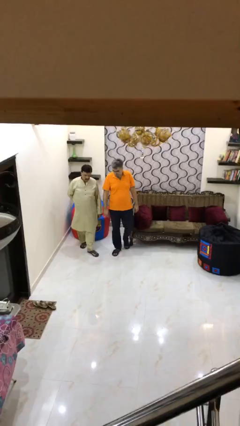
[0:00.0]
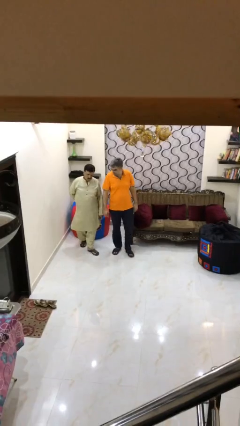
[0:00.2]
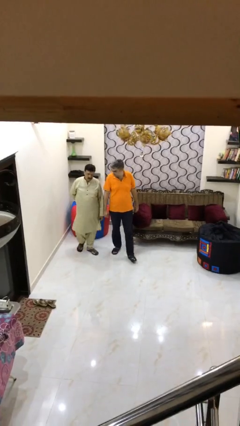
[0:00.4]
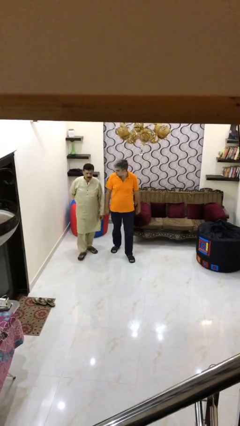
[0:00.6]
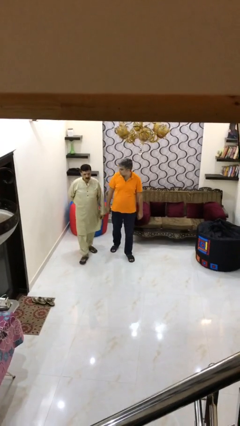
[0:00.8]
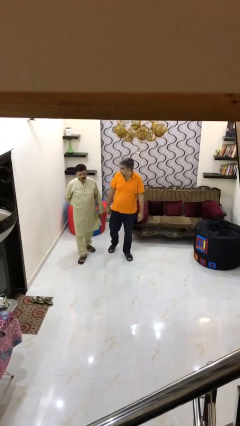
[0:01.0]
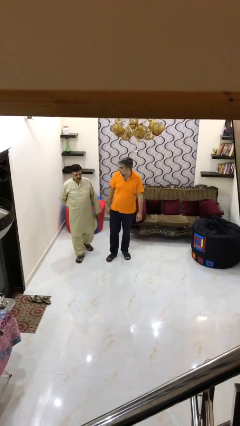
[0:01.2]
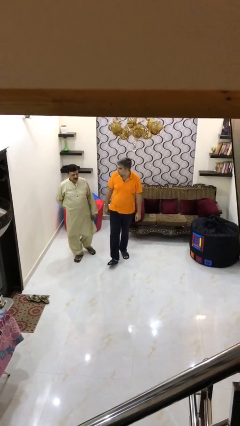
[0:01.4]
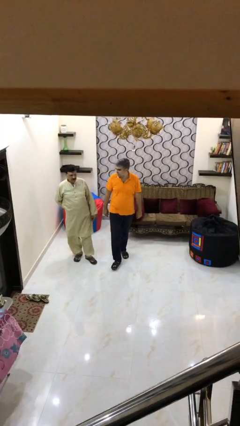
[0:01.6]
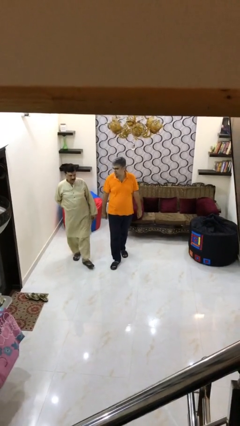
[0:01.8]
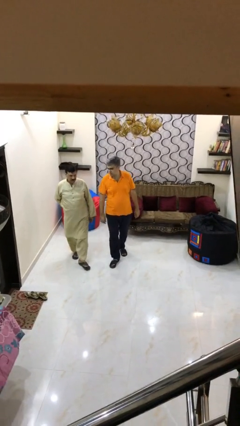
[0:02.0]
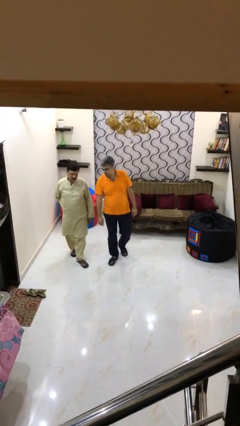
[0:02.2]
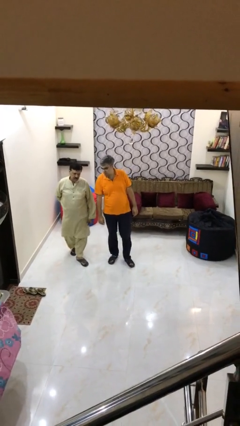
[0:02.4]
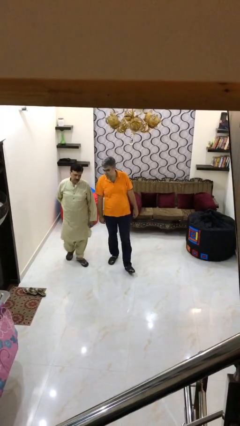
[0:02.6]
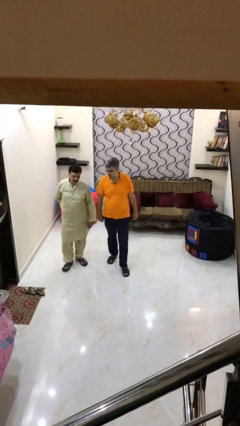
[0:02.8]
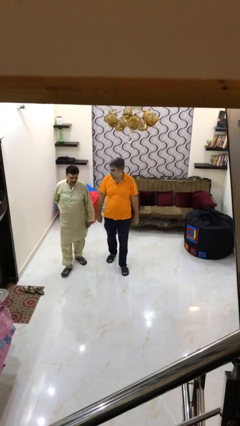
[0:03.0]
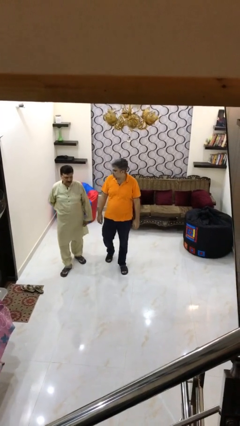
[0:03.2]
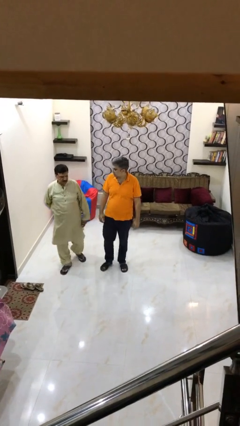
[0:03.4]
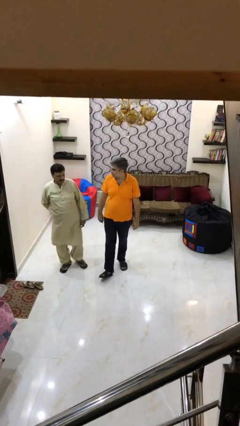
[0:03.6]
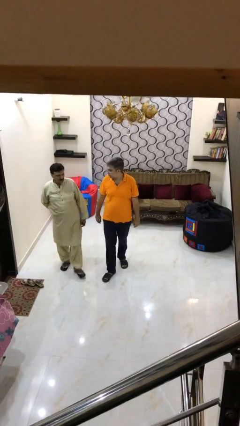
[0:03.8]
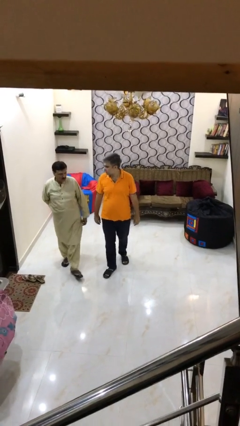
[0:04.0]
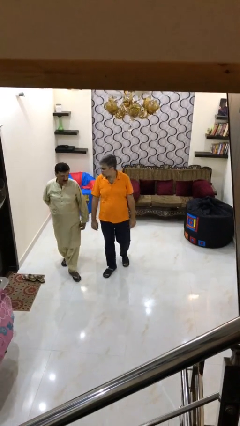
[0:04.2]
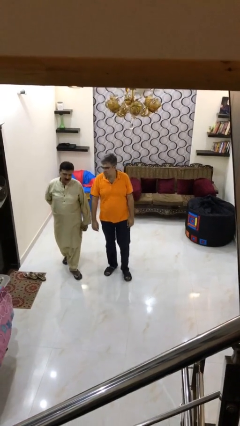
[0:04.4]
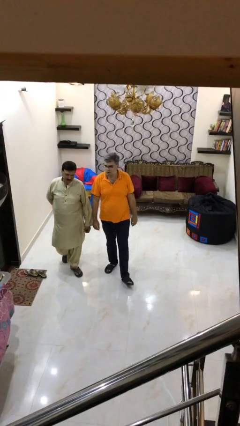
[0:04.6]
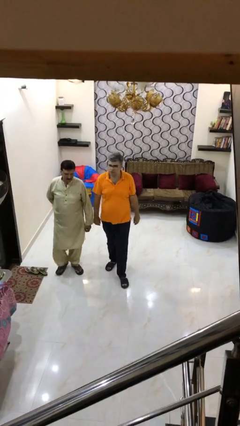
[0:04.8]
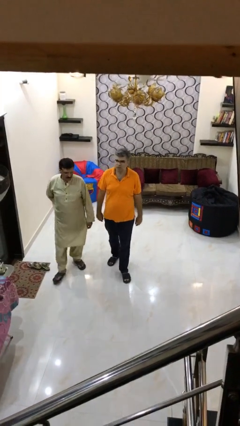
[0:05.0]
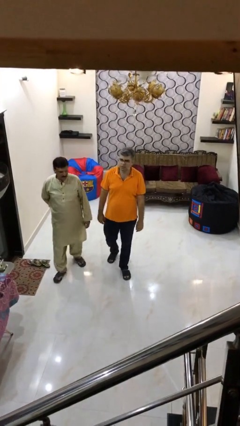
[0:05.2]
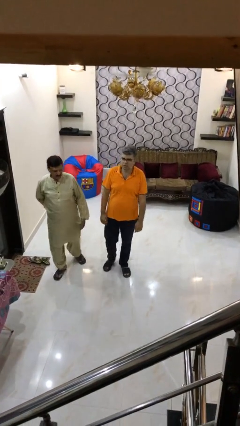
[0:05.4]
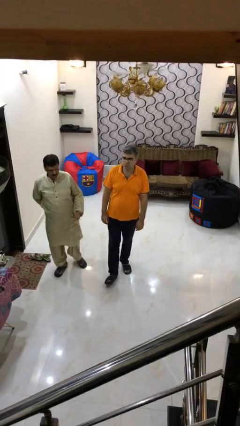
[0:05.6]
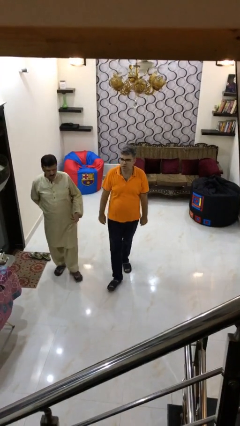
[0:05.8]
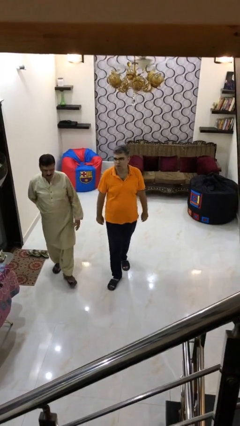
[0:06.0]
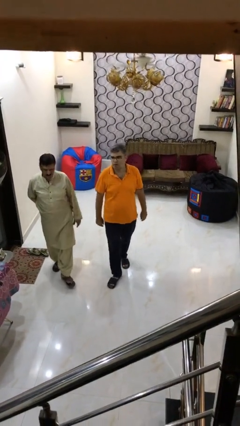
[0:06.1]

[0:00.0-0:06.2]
person talks to person

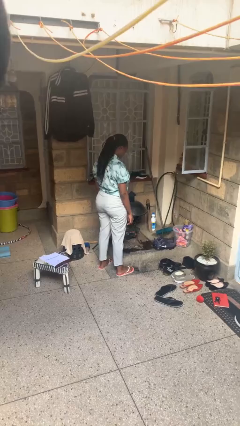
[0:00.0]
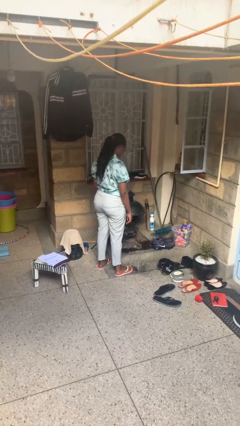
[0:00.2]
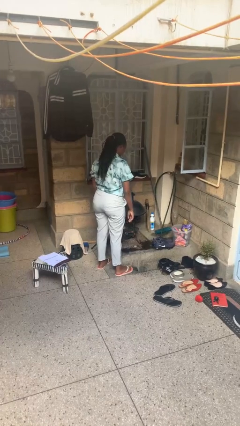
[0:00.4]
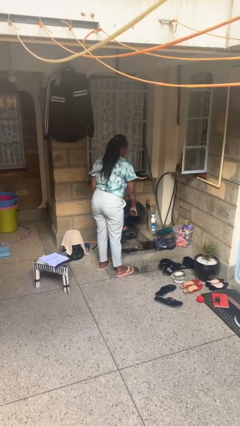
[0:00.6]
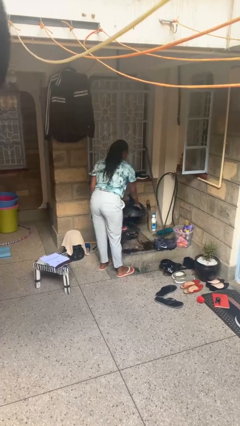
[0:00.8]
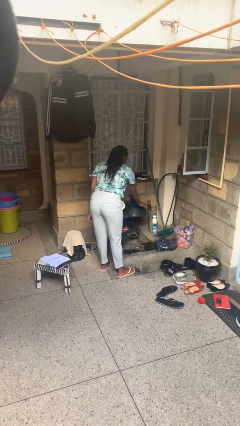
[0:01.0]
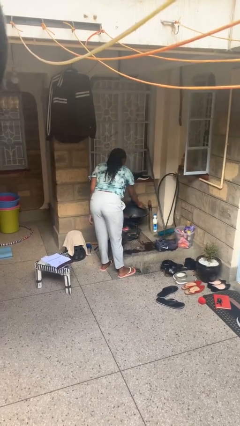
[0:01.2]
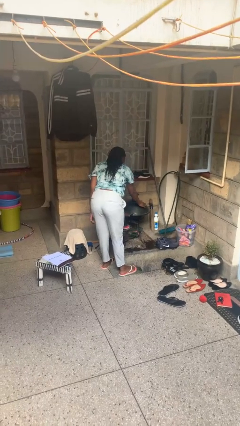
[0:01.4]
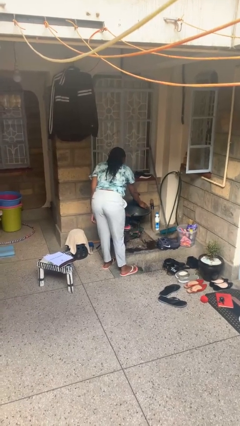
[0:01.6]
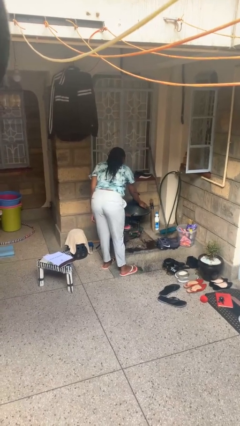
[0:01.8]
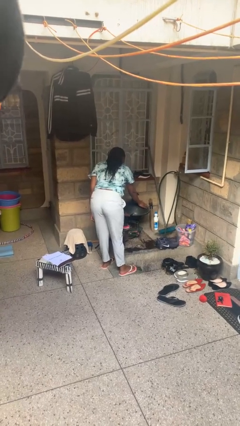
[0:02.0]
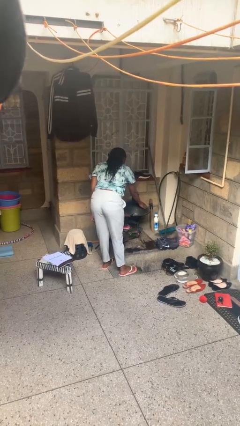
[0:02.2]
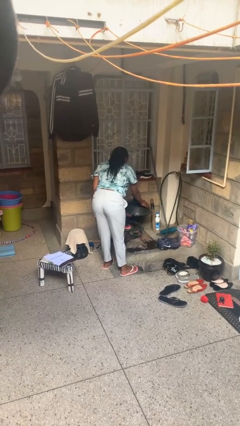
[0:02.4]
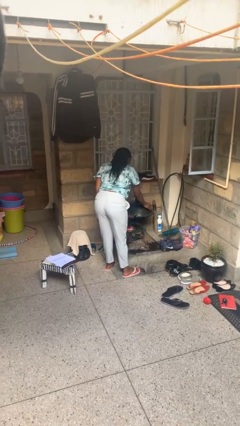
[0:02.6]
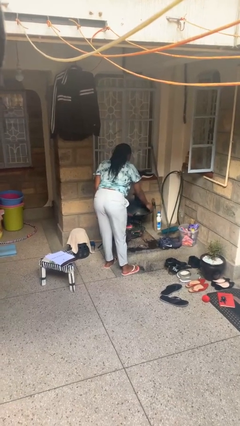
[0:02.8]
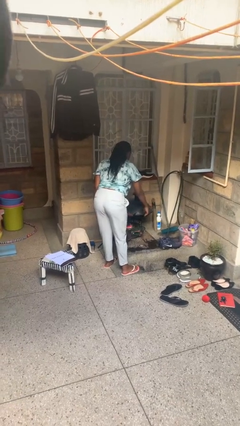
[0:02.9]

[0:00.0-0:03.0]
person taps object with finger

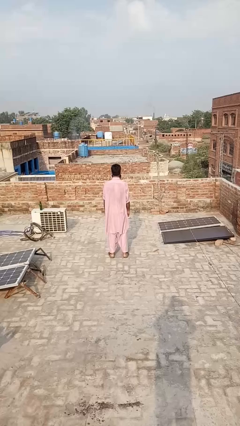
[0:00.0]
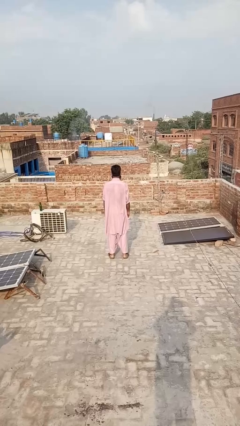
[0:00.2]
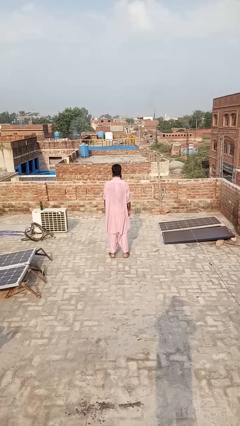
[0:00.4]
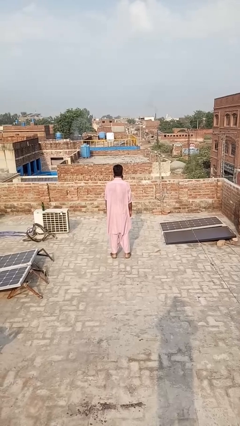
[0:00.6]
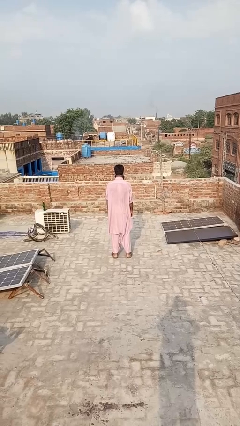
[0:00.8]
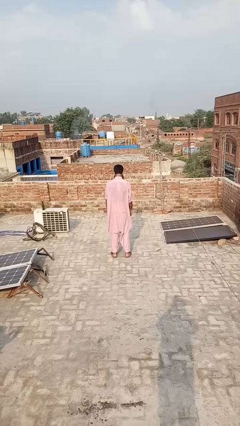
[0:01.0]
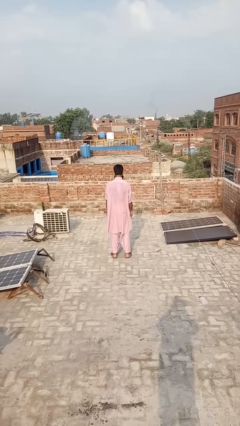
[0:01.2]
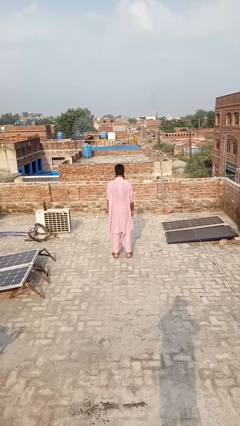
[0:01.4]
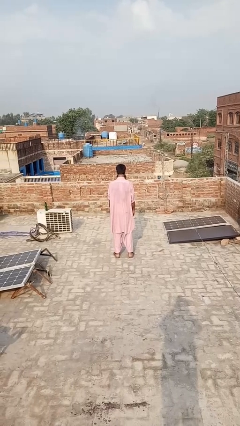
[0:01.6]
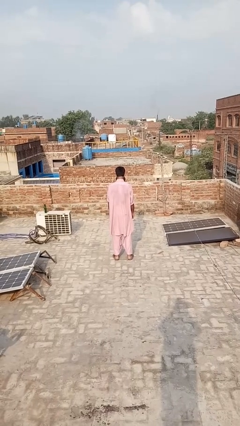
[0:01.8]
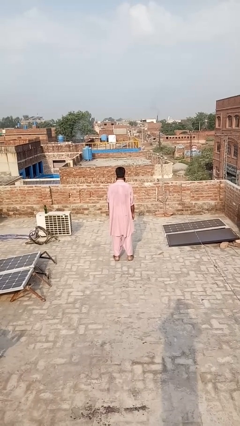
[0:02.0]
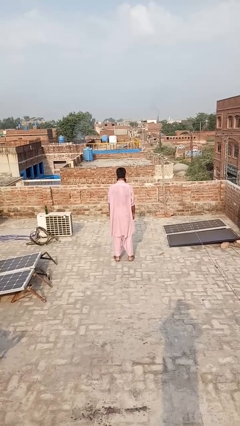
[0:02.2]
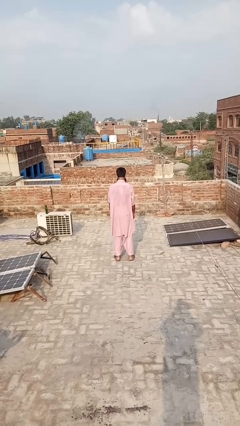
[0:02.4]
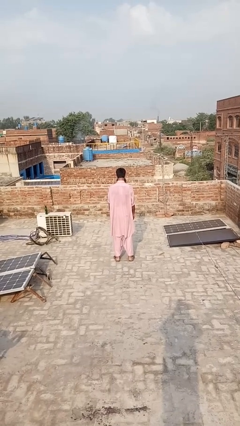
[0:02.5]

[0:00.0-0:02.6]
person nods head

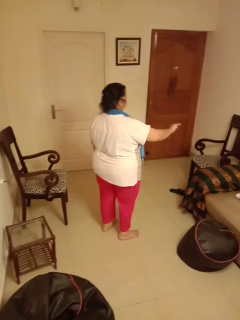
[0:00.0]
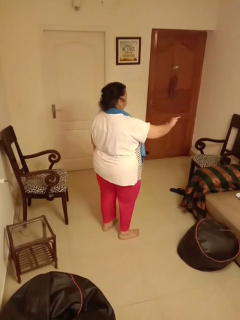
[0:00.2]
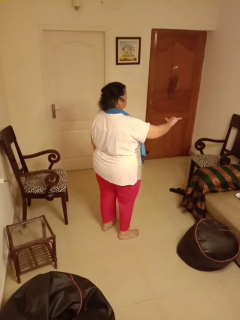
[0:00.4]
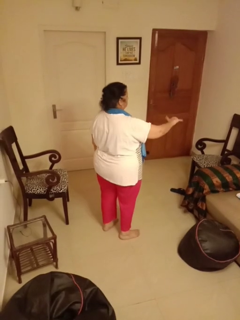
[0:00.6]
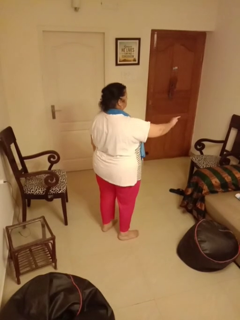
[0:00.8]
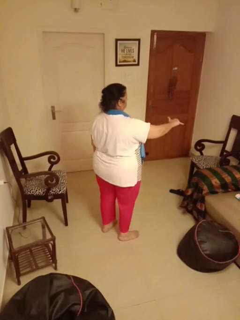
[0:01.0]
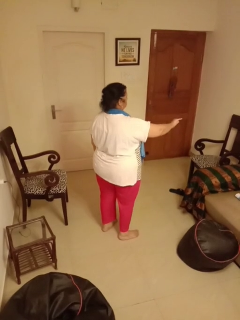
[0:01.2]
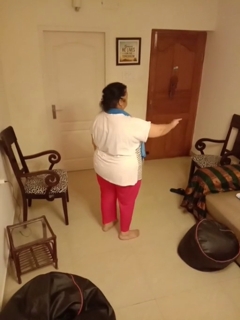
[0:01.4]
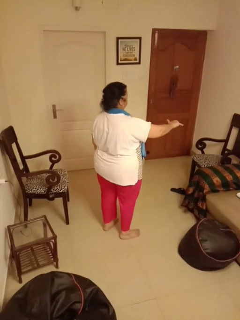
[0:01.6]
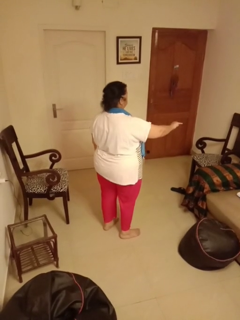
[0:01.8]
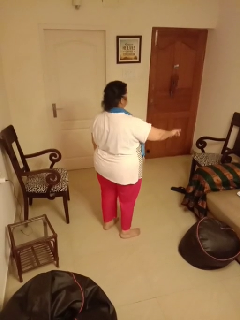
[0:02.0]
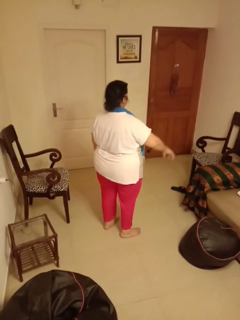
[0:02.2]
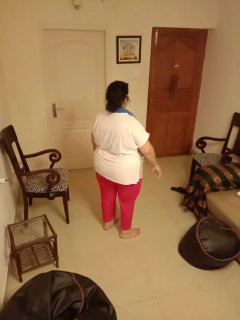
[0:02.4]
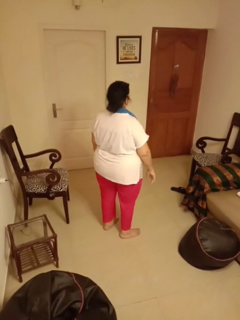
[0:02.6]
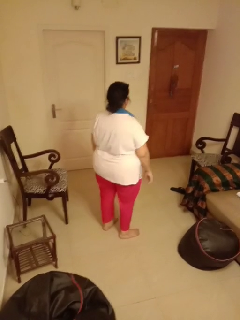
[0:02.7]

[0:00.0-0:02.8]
person gestures hang loose

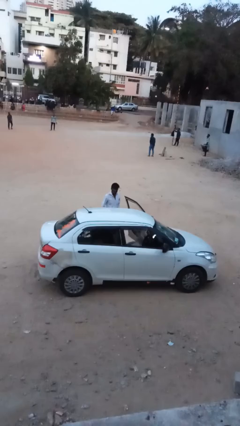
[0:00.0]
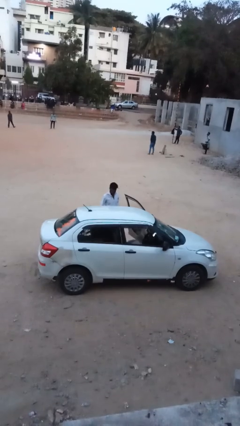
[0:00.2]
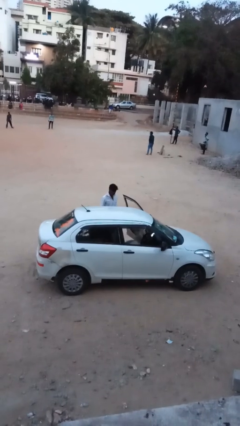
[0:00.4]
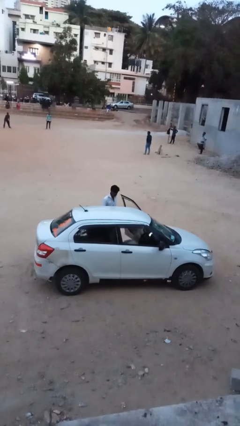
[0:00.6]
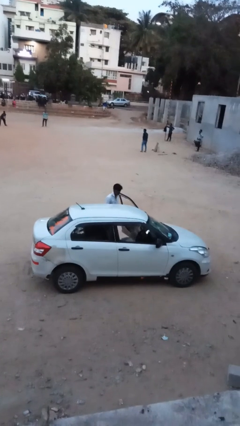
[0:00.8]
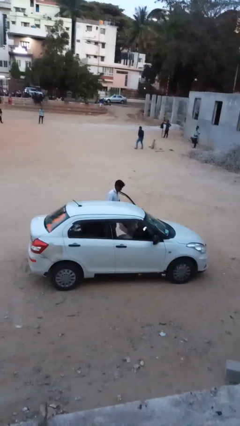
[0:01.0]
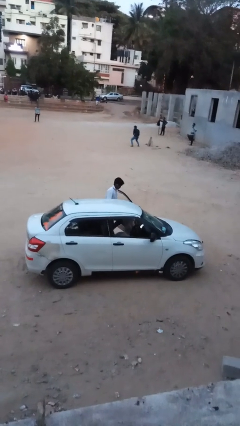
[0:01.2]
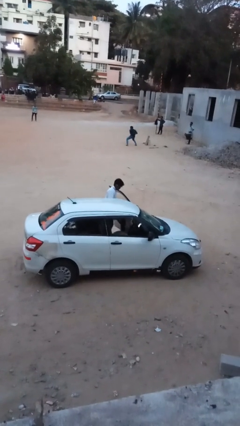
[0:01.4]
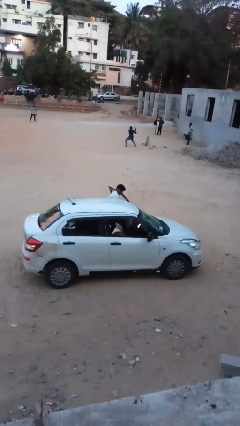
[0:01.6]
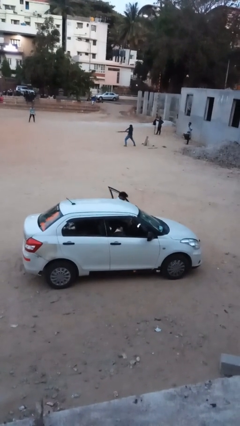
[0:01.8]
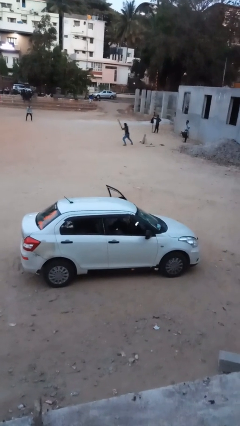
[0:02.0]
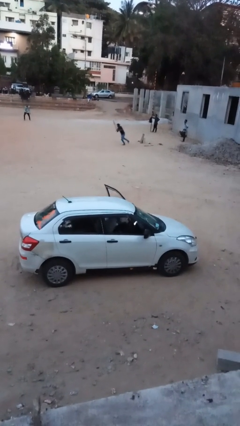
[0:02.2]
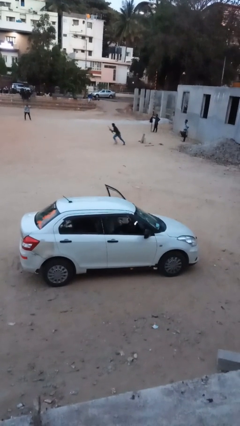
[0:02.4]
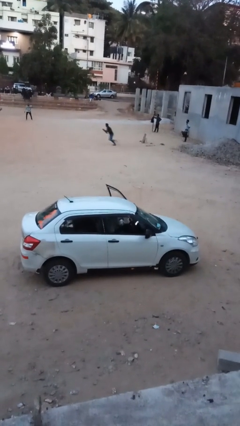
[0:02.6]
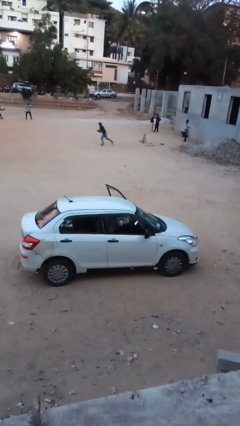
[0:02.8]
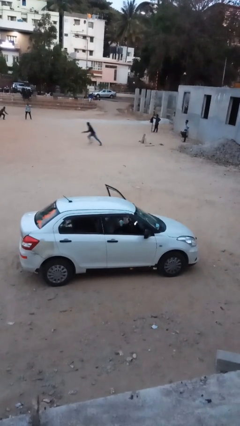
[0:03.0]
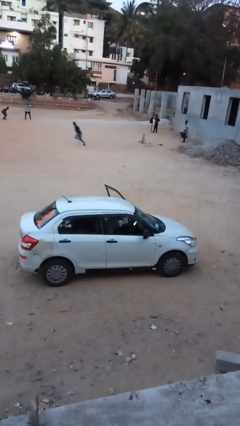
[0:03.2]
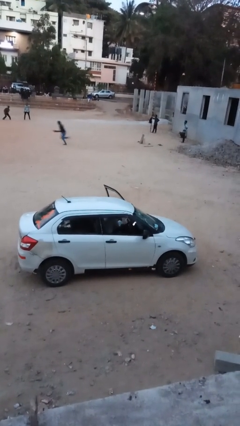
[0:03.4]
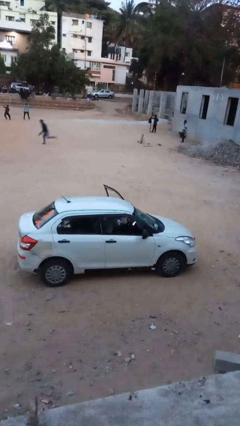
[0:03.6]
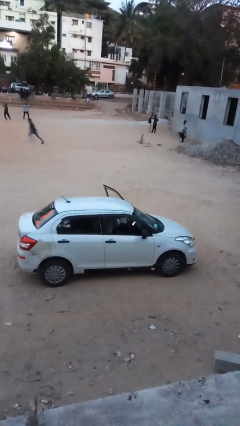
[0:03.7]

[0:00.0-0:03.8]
person enters car
